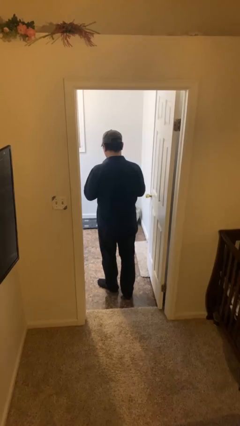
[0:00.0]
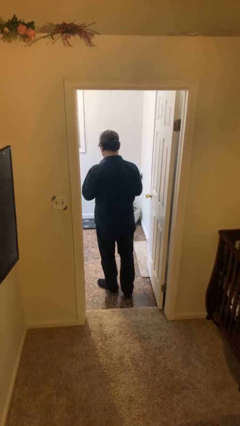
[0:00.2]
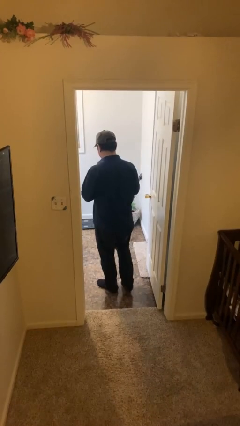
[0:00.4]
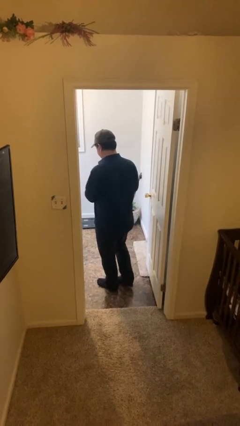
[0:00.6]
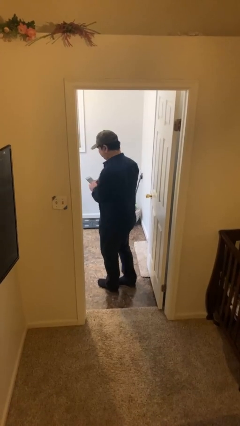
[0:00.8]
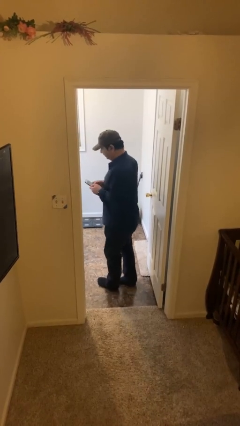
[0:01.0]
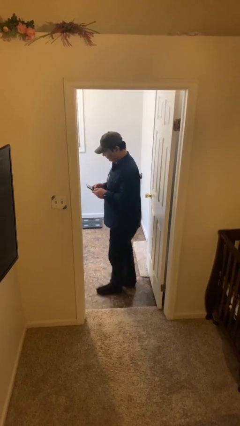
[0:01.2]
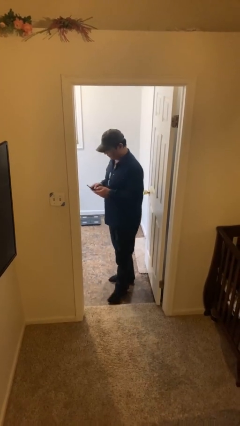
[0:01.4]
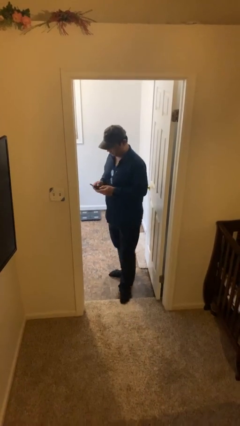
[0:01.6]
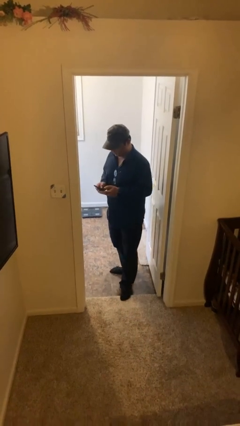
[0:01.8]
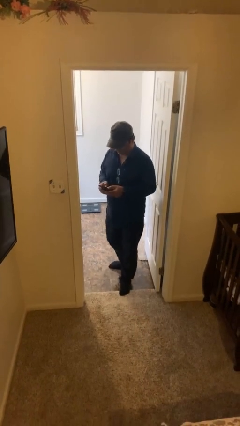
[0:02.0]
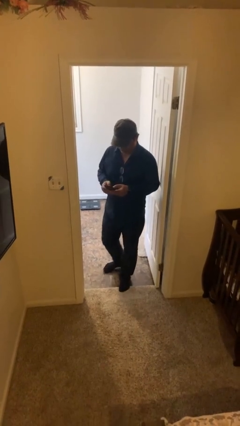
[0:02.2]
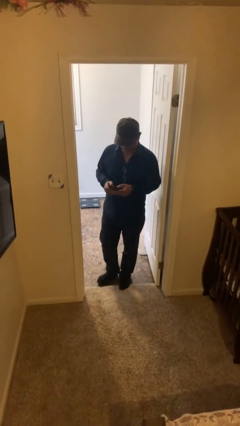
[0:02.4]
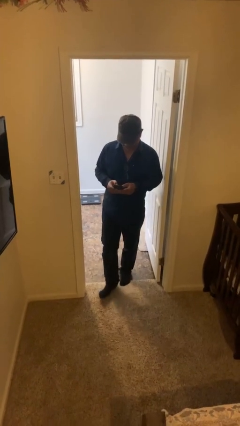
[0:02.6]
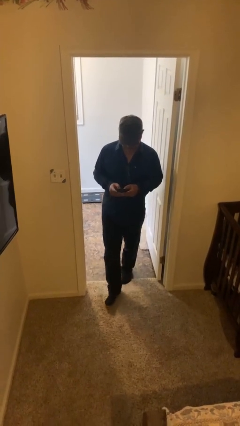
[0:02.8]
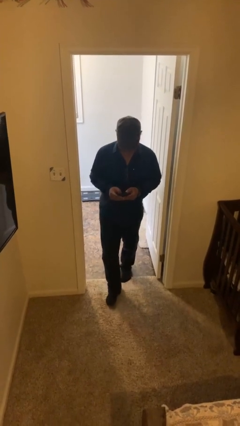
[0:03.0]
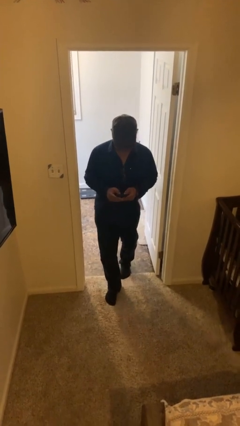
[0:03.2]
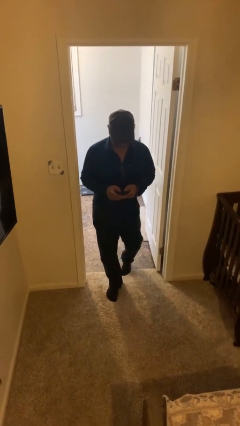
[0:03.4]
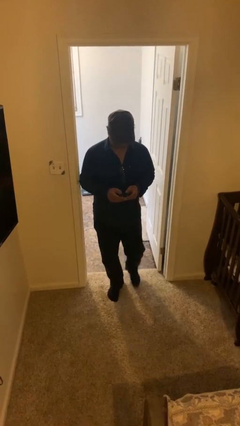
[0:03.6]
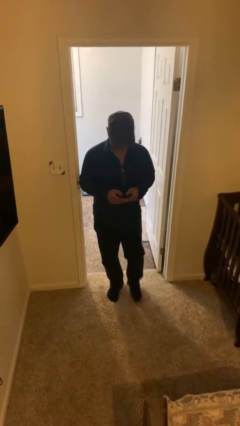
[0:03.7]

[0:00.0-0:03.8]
person enters scene through structure

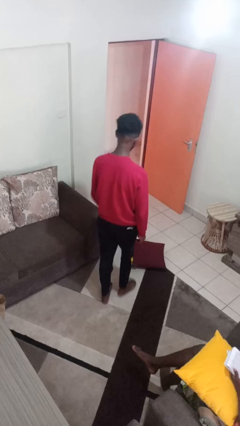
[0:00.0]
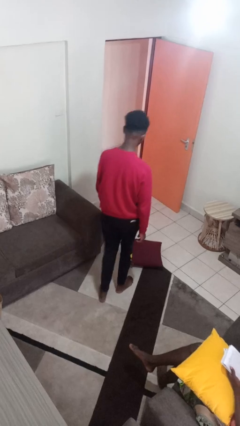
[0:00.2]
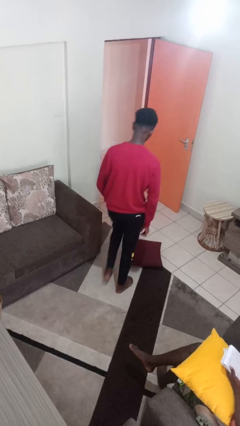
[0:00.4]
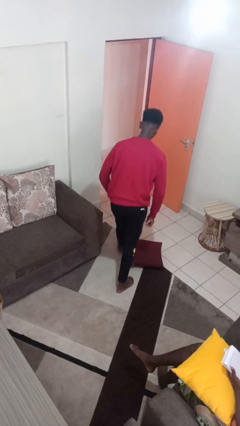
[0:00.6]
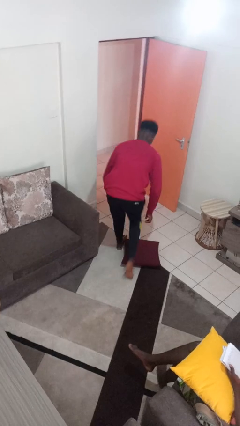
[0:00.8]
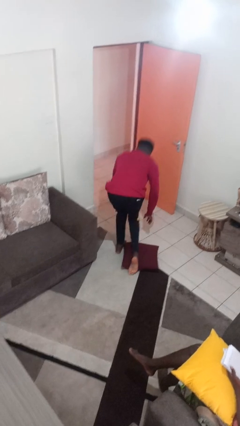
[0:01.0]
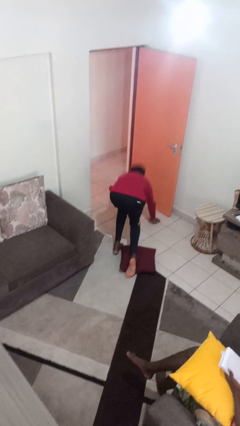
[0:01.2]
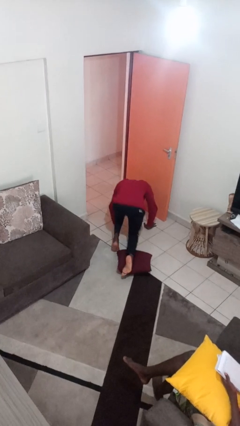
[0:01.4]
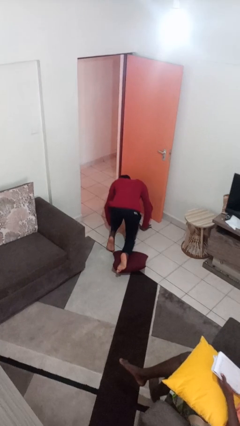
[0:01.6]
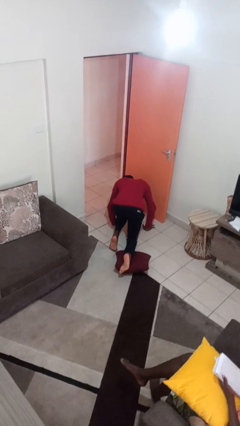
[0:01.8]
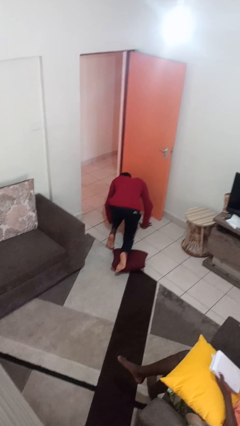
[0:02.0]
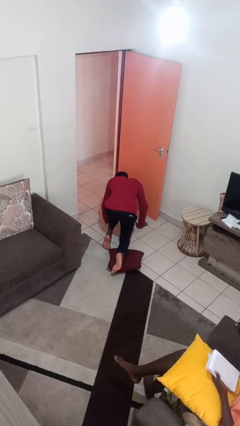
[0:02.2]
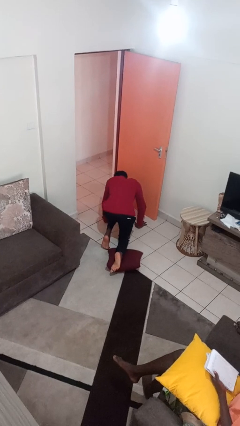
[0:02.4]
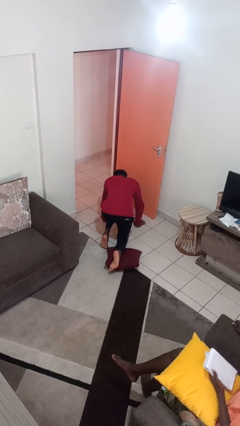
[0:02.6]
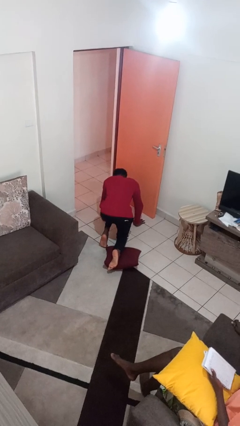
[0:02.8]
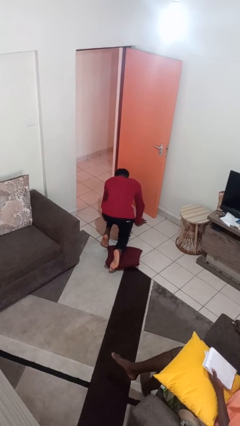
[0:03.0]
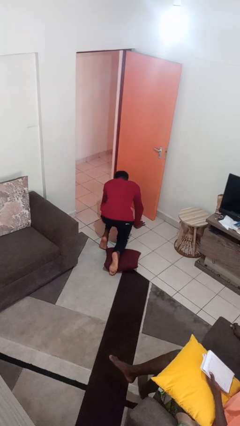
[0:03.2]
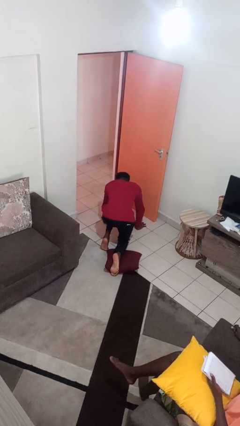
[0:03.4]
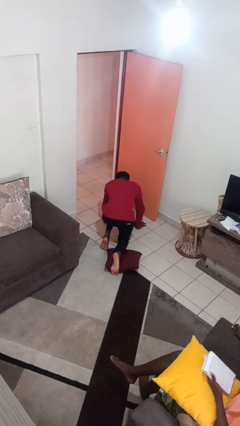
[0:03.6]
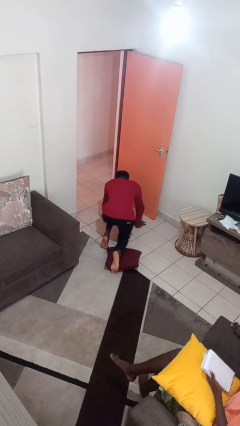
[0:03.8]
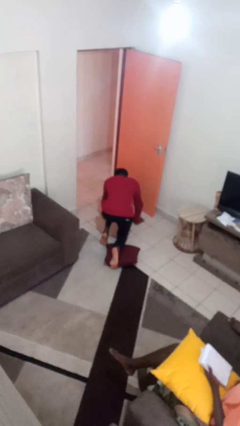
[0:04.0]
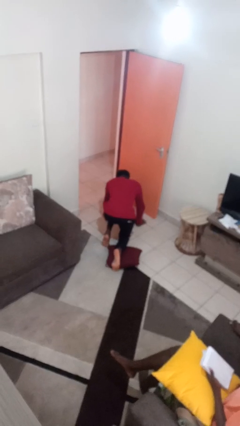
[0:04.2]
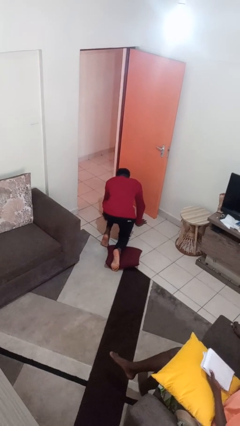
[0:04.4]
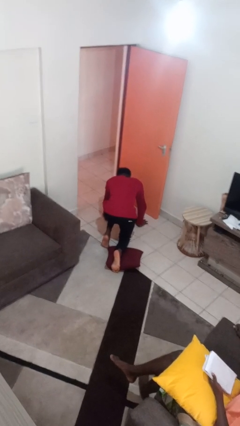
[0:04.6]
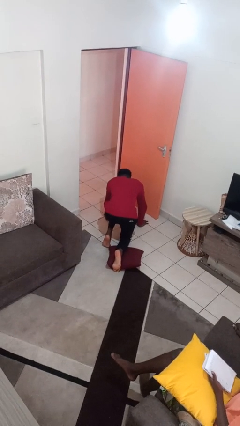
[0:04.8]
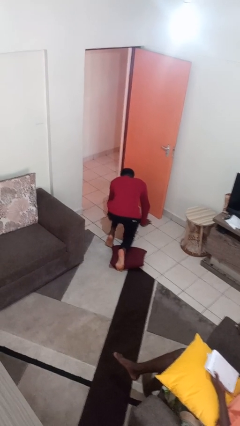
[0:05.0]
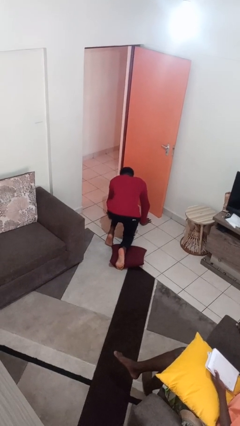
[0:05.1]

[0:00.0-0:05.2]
person trips on object on floor

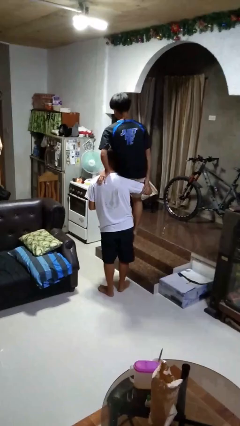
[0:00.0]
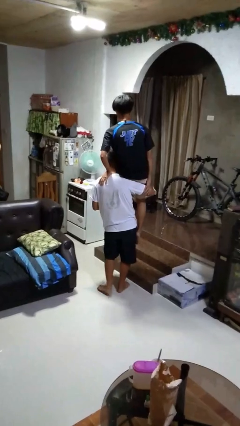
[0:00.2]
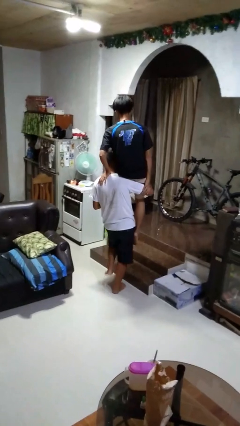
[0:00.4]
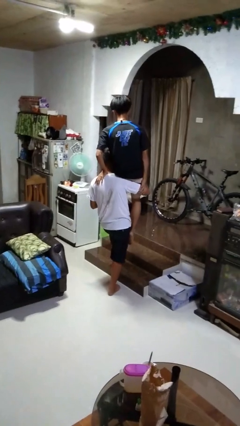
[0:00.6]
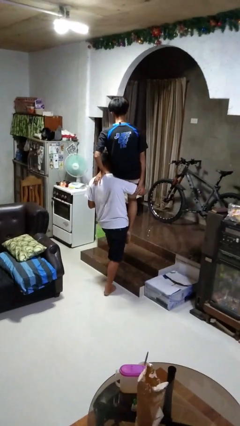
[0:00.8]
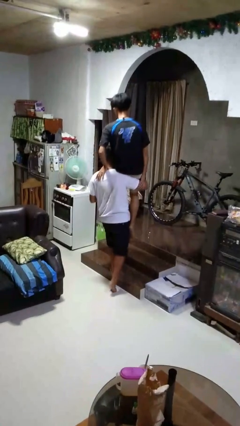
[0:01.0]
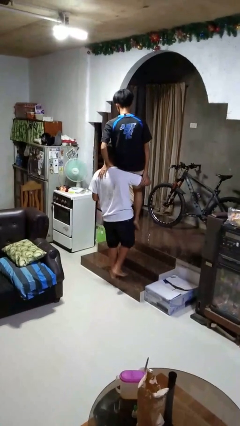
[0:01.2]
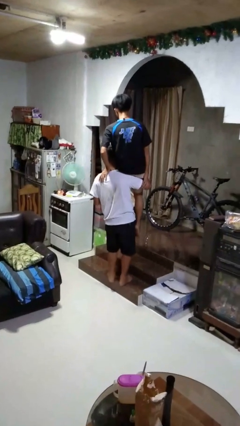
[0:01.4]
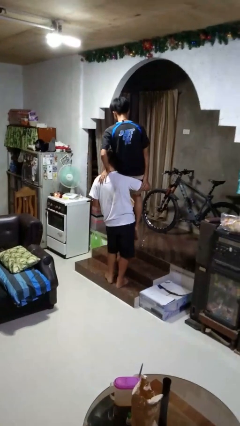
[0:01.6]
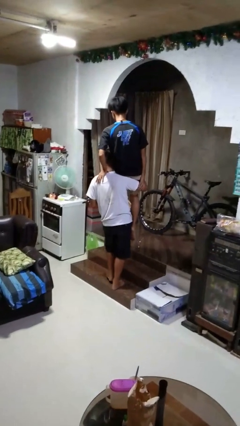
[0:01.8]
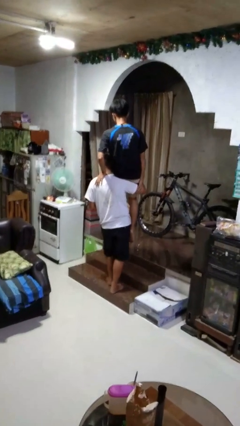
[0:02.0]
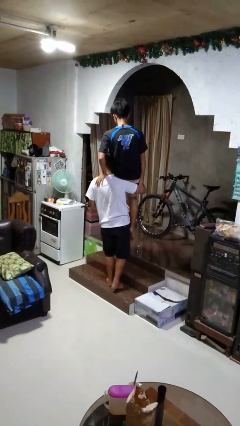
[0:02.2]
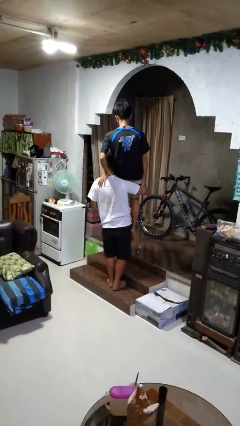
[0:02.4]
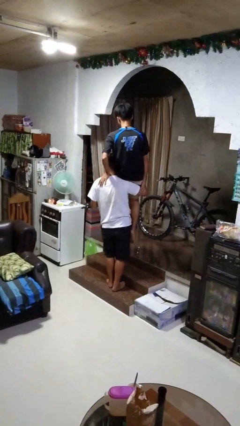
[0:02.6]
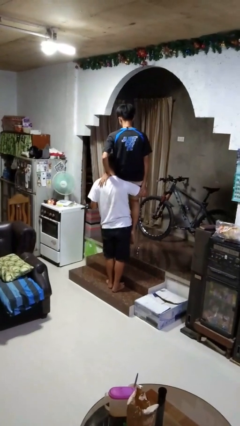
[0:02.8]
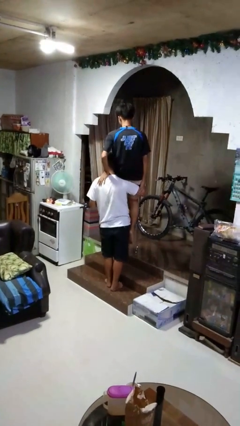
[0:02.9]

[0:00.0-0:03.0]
person carries person on shoulders

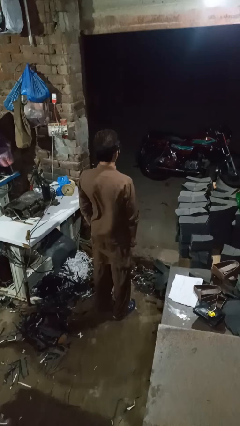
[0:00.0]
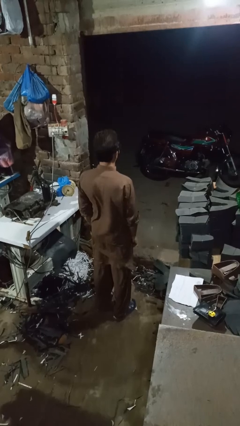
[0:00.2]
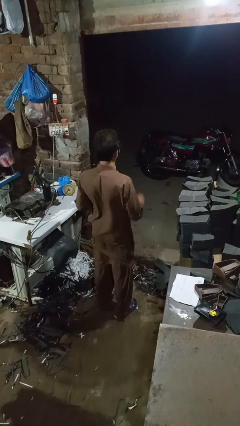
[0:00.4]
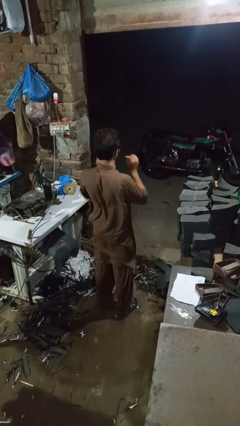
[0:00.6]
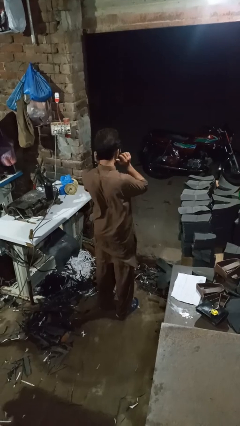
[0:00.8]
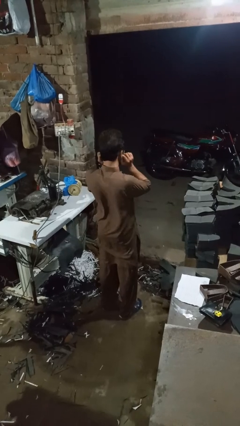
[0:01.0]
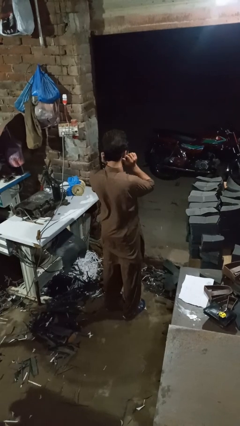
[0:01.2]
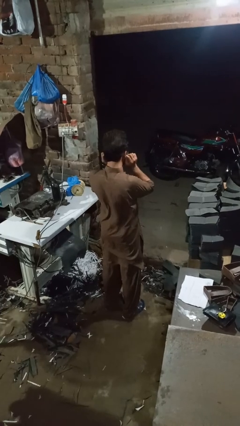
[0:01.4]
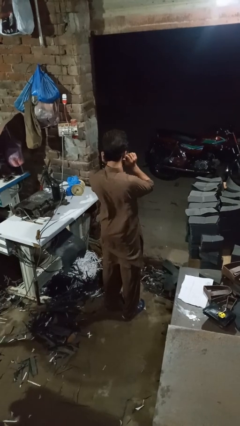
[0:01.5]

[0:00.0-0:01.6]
person touches earlobe

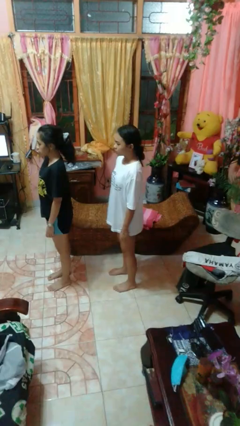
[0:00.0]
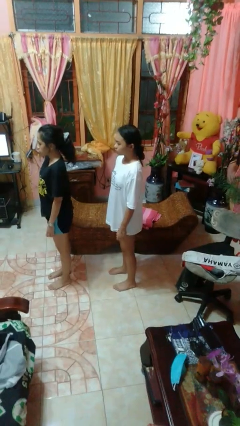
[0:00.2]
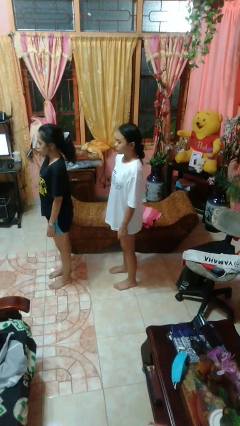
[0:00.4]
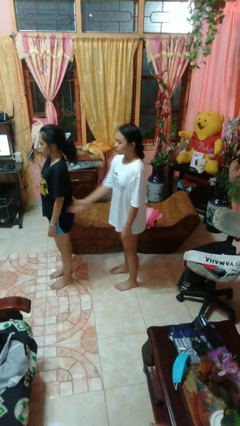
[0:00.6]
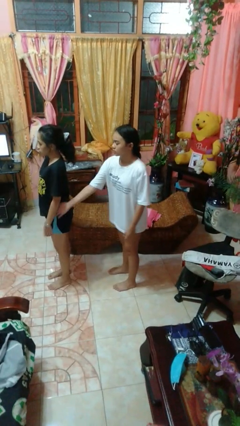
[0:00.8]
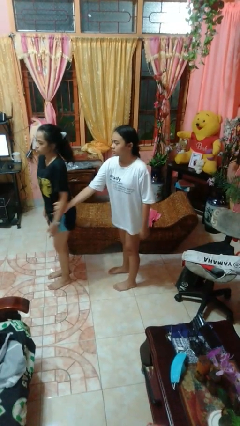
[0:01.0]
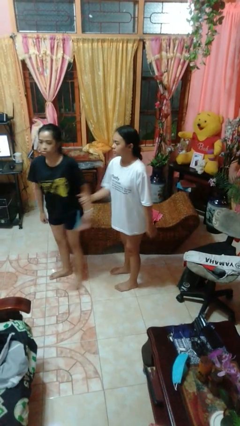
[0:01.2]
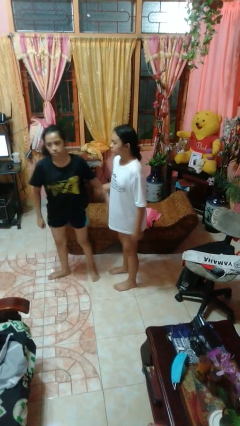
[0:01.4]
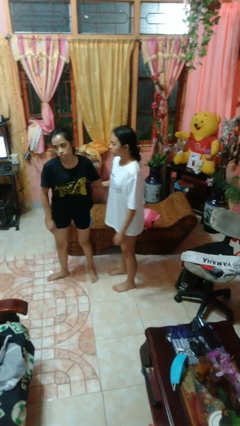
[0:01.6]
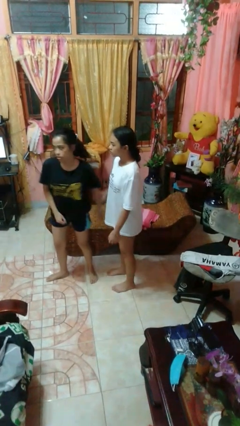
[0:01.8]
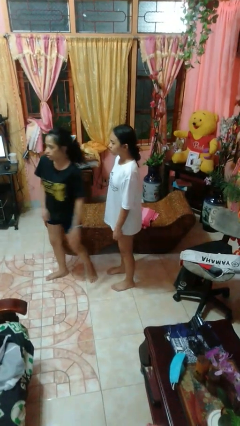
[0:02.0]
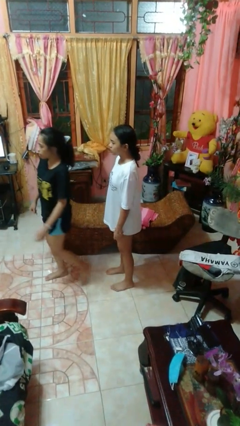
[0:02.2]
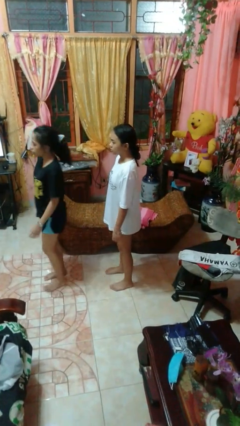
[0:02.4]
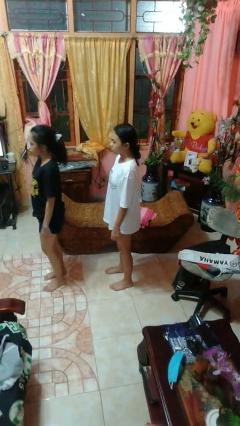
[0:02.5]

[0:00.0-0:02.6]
person grabs person by forearm

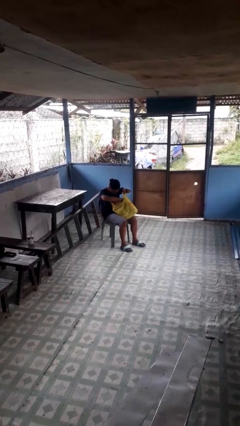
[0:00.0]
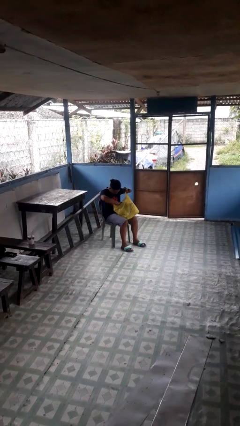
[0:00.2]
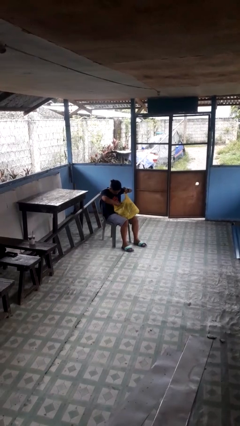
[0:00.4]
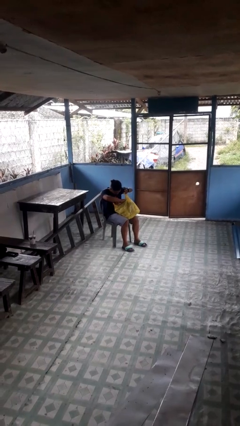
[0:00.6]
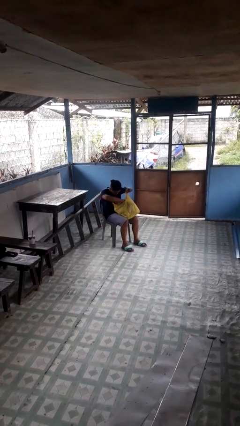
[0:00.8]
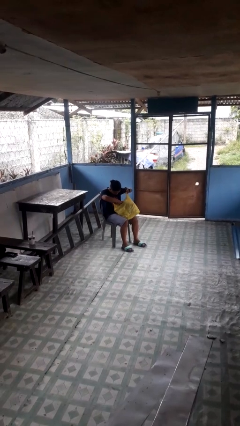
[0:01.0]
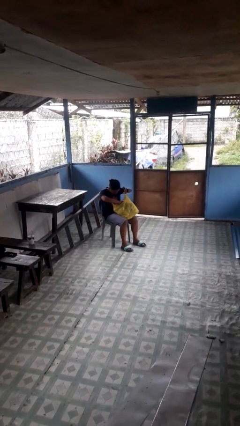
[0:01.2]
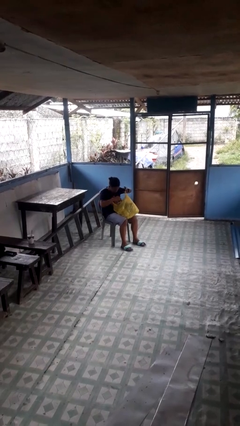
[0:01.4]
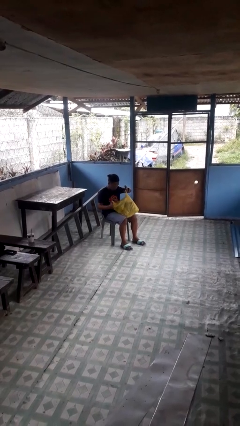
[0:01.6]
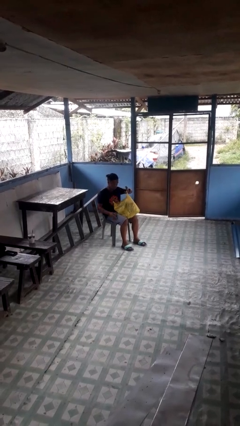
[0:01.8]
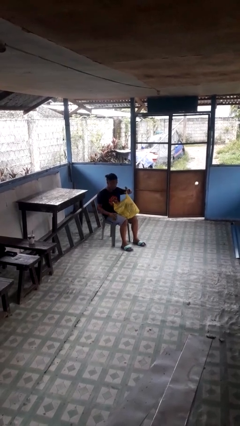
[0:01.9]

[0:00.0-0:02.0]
person searches in bag
